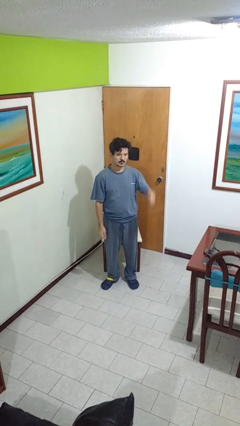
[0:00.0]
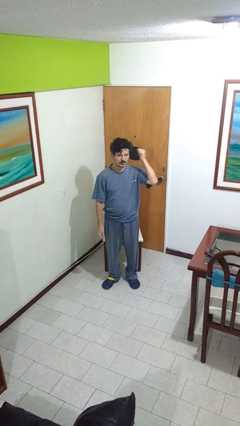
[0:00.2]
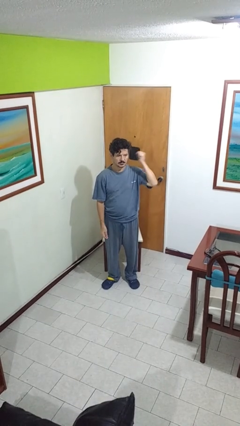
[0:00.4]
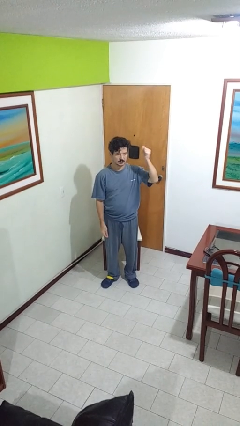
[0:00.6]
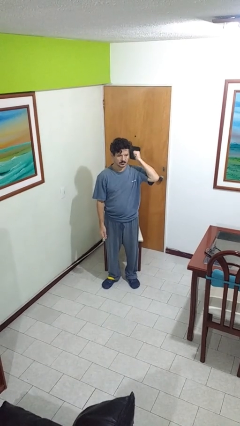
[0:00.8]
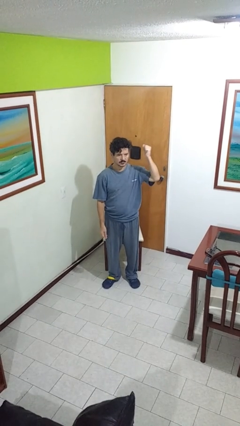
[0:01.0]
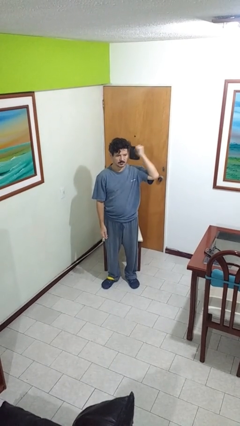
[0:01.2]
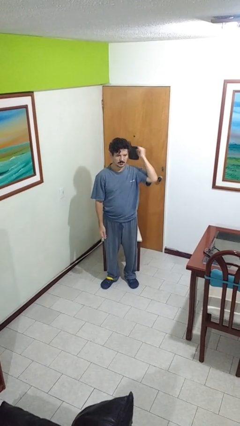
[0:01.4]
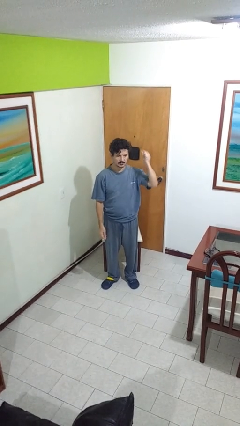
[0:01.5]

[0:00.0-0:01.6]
person gestures behind me

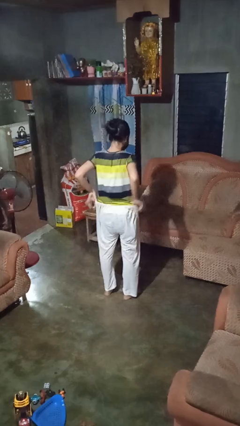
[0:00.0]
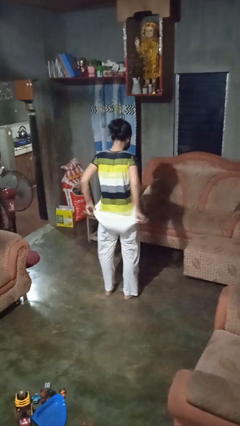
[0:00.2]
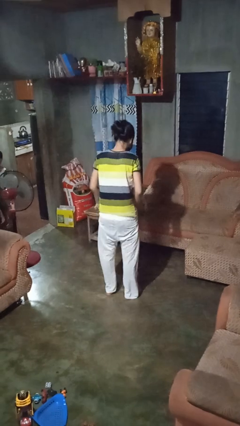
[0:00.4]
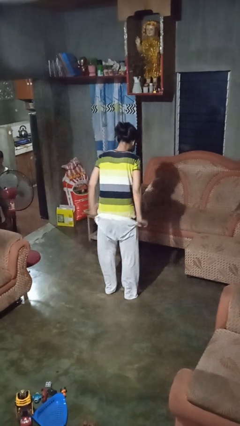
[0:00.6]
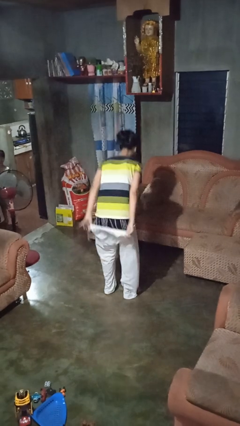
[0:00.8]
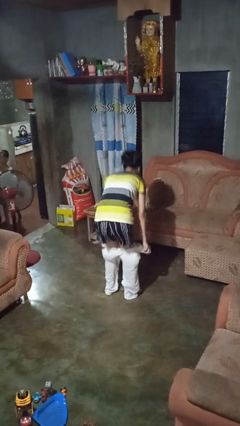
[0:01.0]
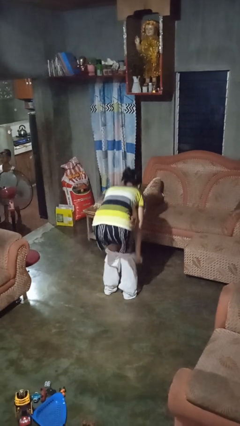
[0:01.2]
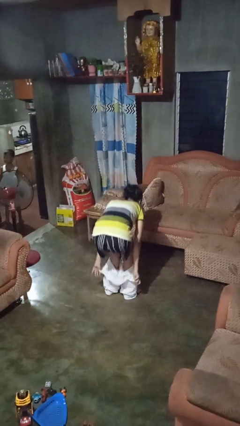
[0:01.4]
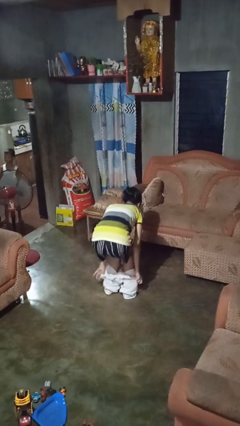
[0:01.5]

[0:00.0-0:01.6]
person takes off pants

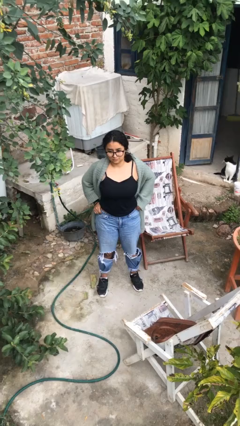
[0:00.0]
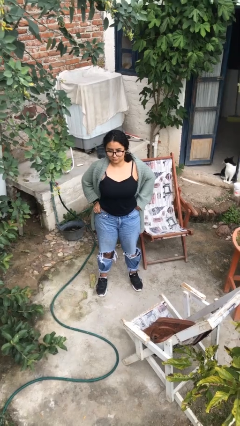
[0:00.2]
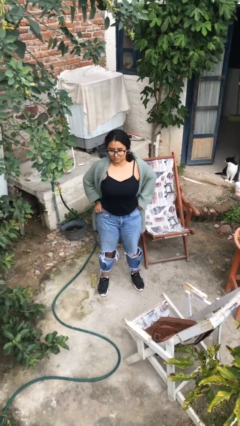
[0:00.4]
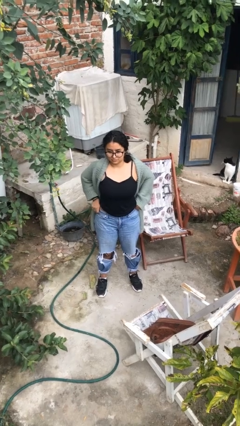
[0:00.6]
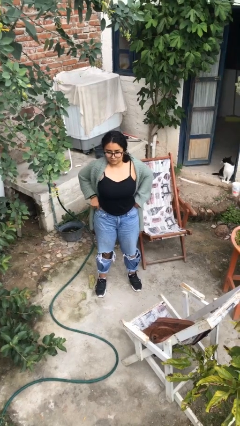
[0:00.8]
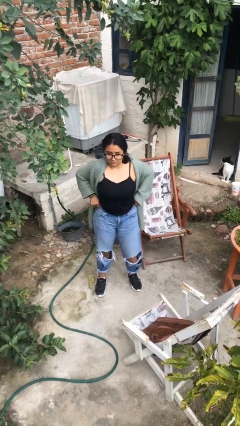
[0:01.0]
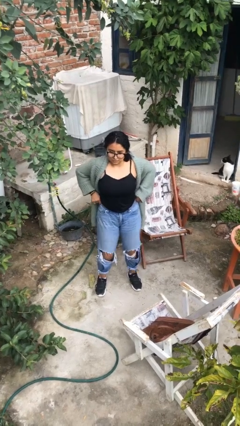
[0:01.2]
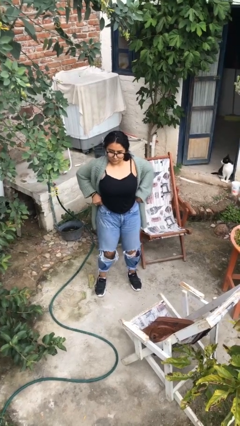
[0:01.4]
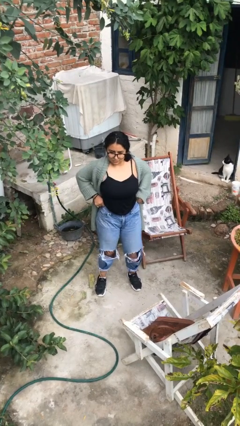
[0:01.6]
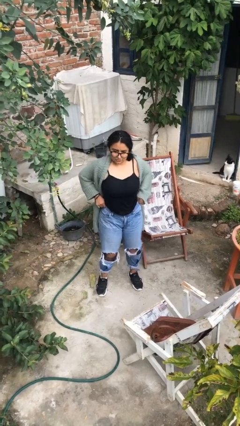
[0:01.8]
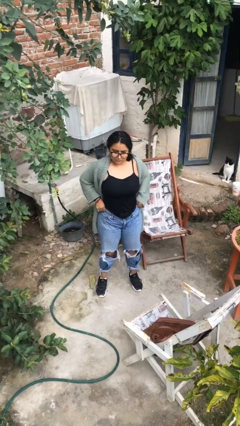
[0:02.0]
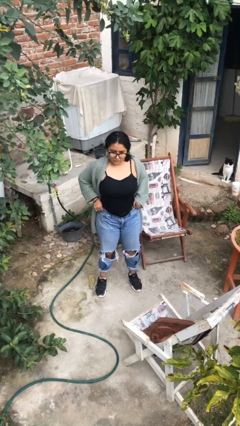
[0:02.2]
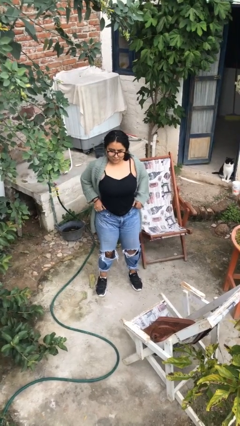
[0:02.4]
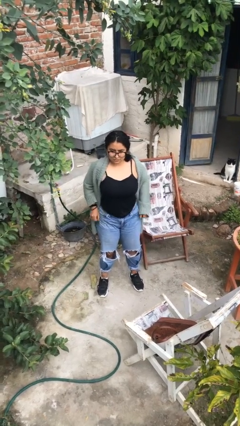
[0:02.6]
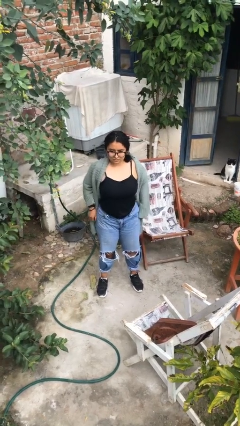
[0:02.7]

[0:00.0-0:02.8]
person hikes up pants

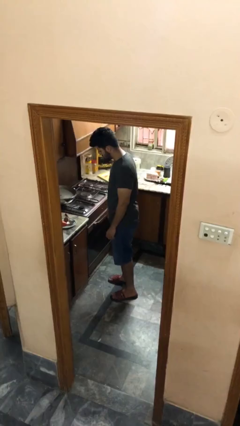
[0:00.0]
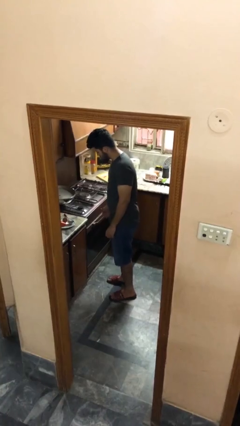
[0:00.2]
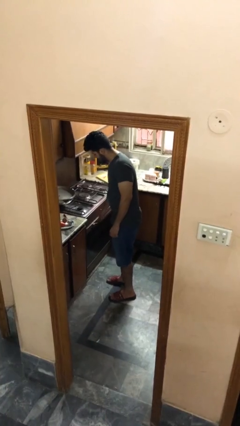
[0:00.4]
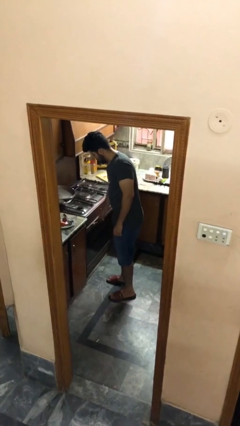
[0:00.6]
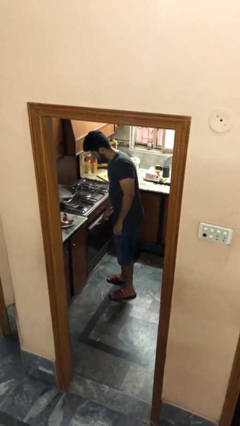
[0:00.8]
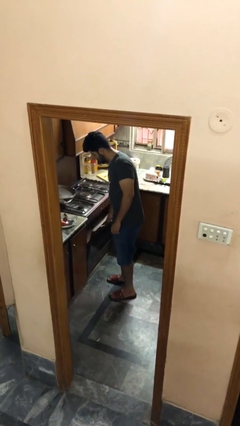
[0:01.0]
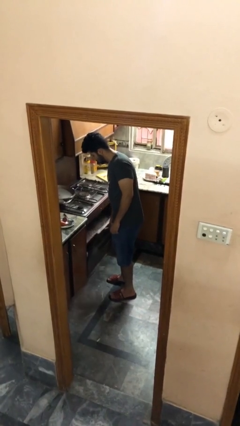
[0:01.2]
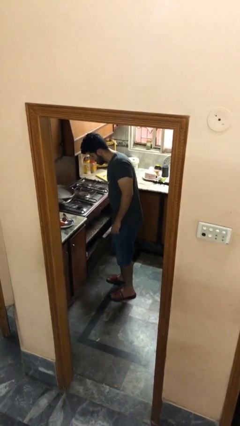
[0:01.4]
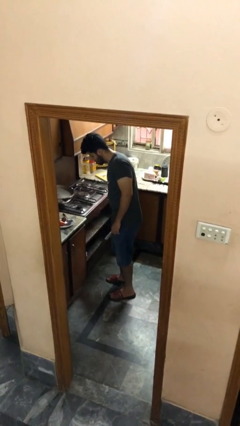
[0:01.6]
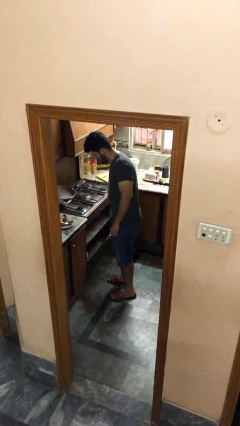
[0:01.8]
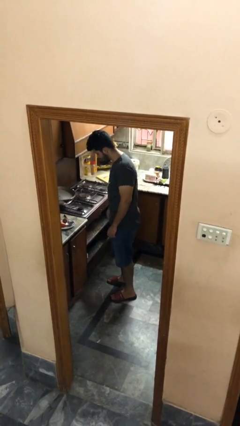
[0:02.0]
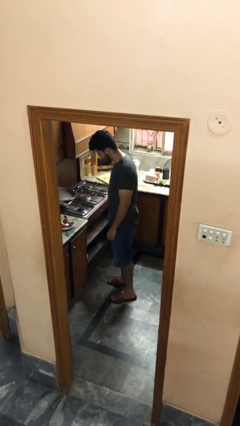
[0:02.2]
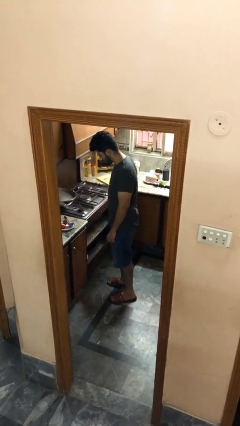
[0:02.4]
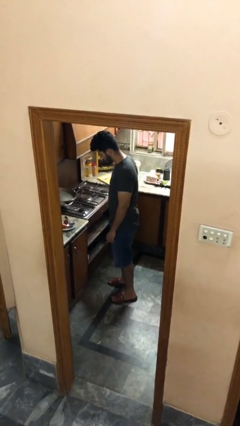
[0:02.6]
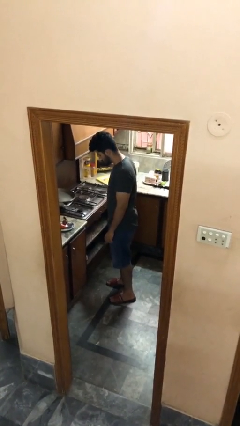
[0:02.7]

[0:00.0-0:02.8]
person opens oven door

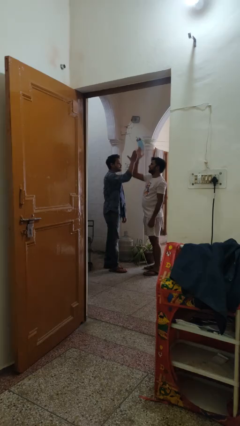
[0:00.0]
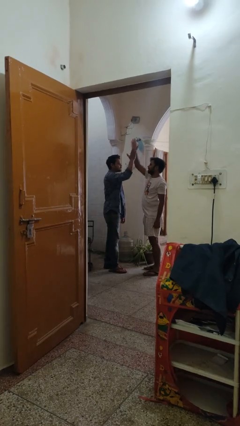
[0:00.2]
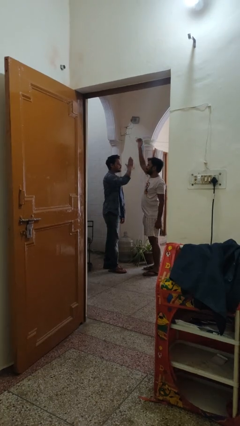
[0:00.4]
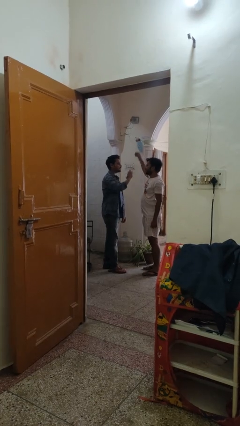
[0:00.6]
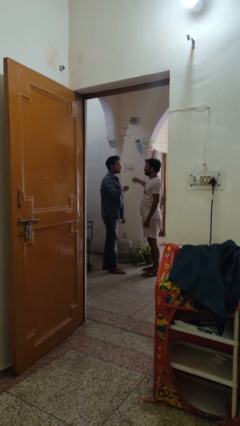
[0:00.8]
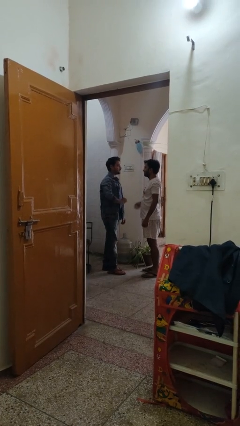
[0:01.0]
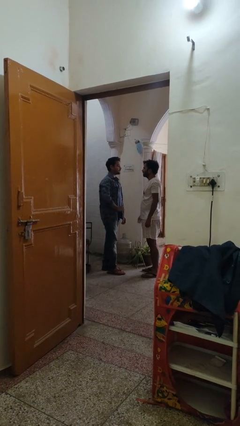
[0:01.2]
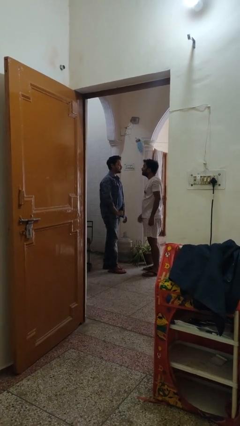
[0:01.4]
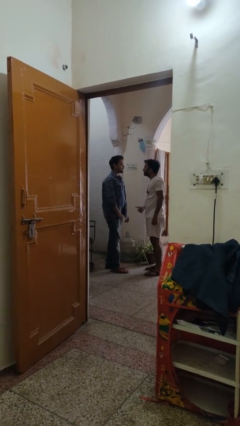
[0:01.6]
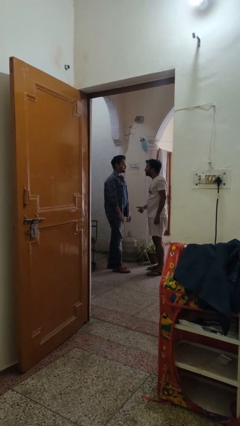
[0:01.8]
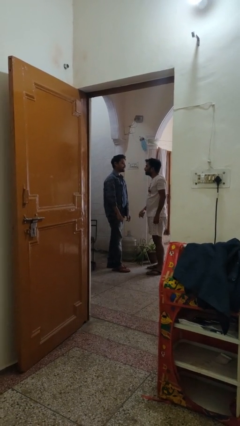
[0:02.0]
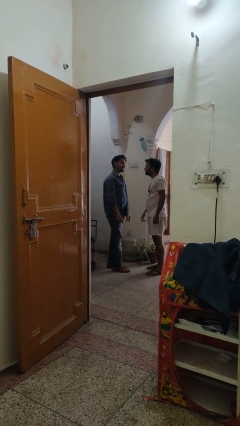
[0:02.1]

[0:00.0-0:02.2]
person highfives hand

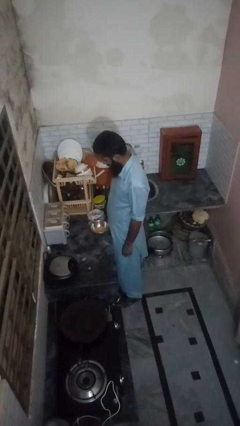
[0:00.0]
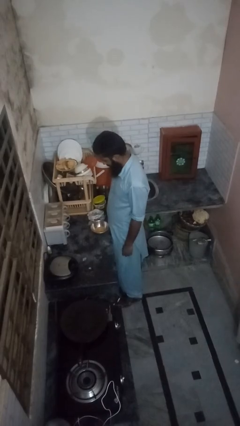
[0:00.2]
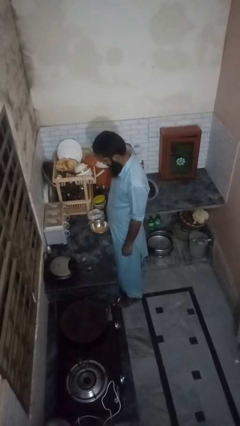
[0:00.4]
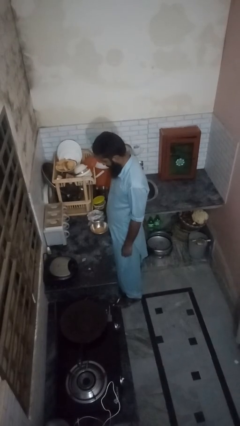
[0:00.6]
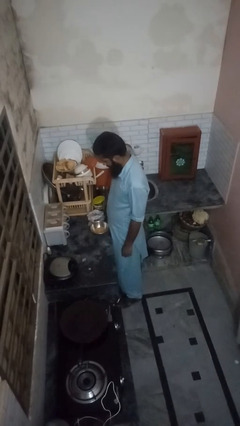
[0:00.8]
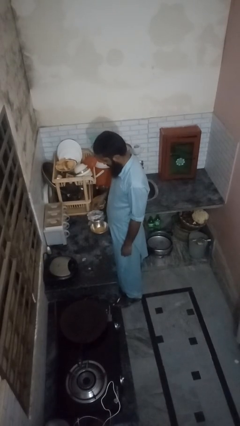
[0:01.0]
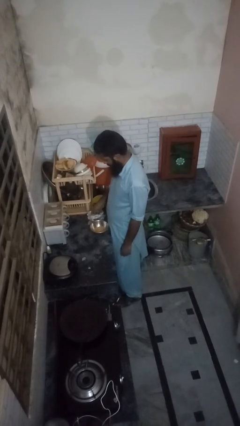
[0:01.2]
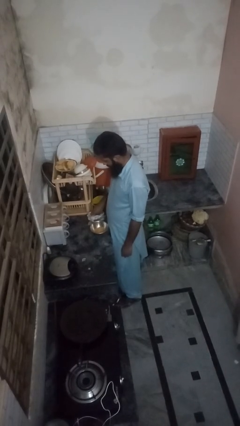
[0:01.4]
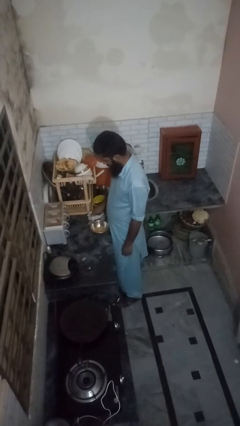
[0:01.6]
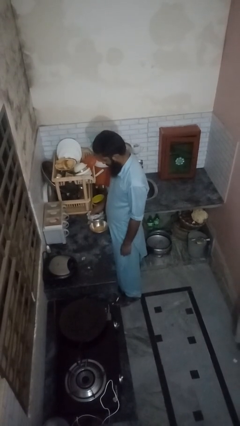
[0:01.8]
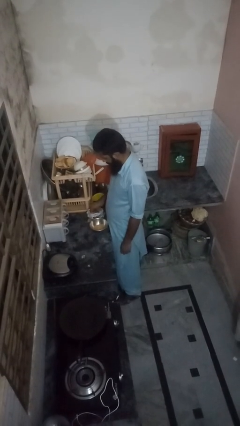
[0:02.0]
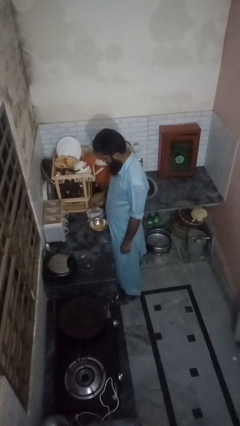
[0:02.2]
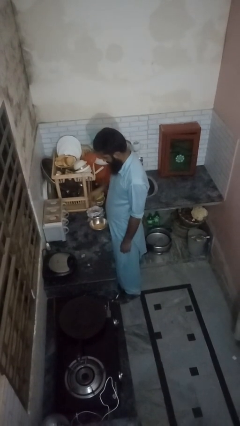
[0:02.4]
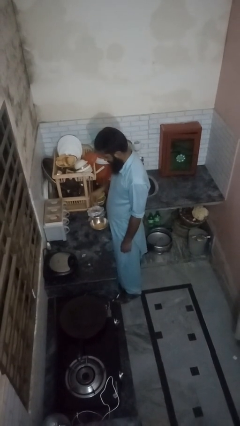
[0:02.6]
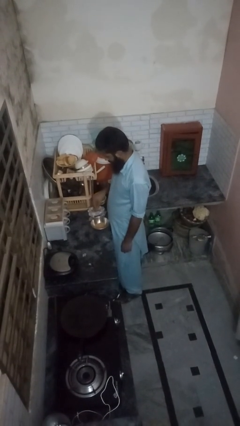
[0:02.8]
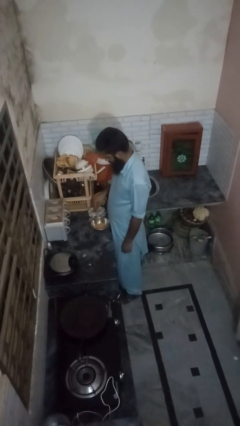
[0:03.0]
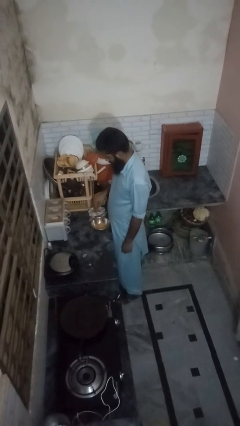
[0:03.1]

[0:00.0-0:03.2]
person pours into bowl

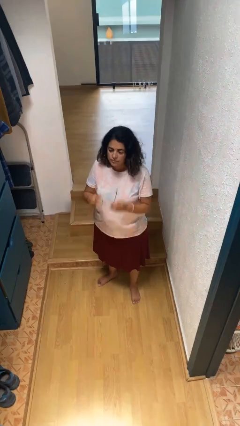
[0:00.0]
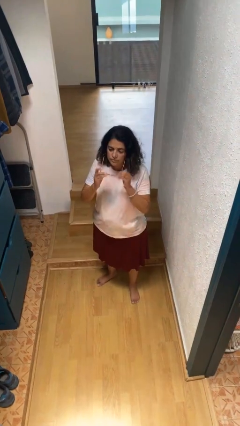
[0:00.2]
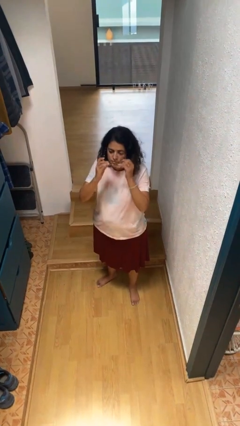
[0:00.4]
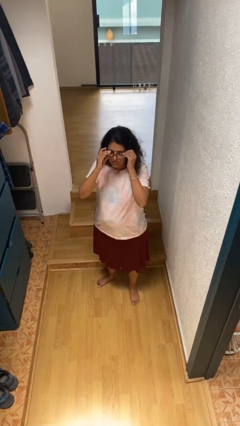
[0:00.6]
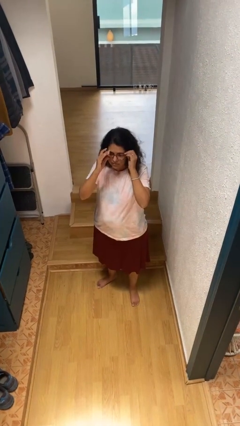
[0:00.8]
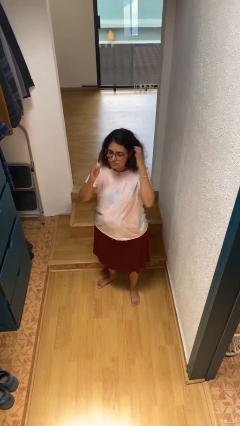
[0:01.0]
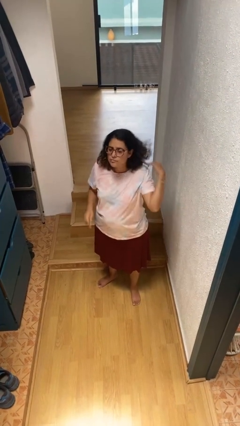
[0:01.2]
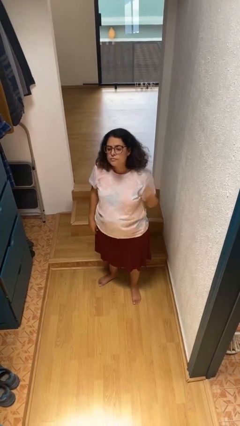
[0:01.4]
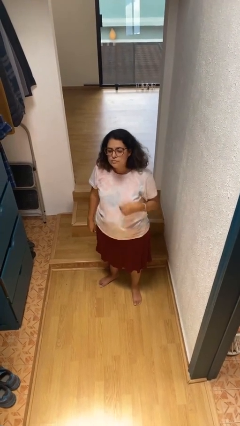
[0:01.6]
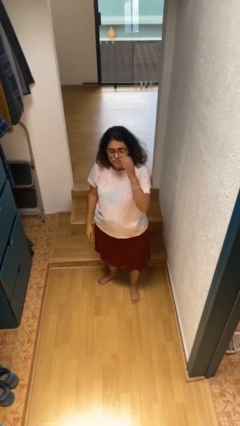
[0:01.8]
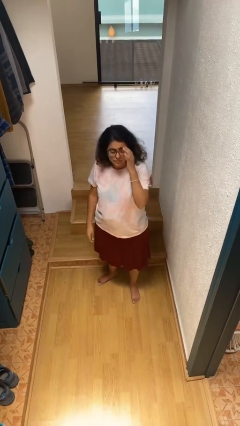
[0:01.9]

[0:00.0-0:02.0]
person puts on glasses

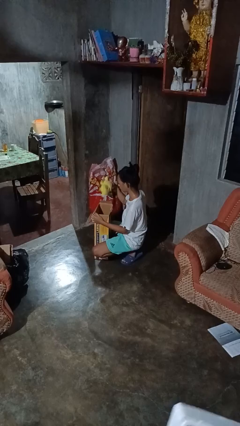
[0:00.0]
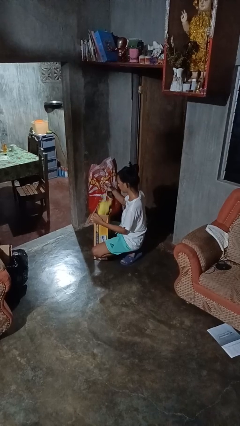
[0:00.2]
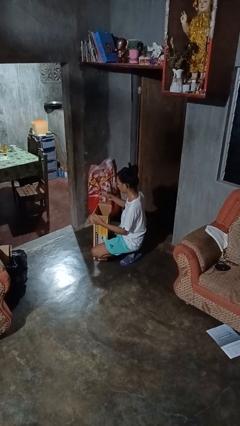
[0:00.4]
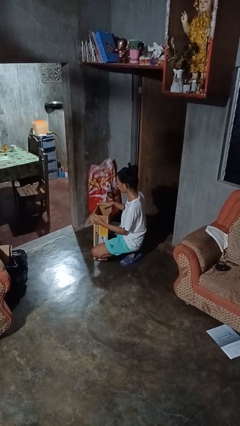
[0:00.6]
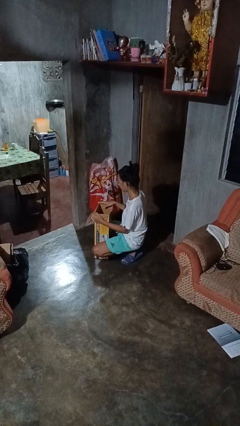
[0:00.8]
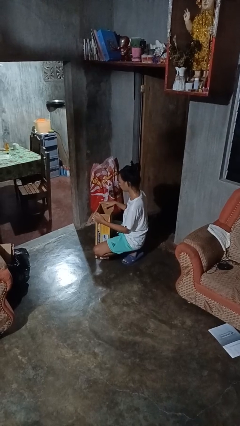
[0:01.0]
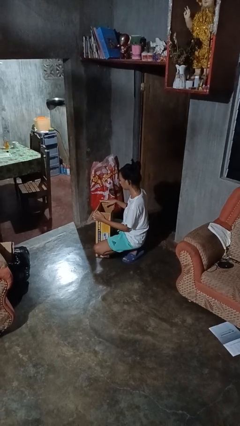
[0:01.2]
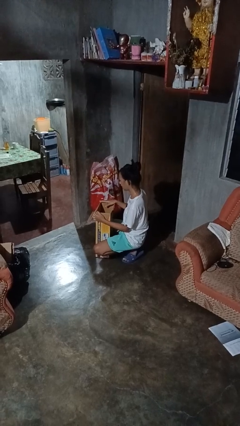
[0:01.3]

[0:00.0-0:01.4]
person puts object into box
